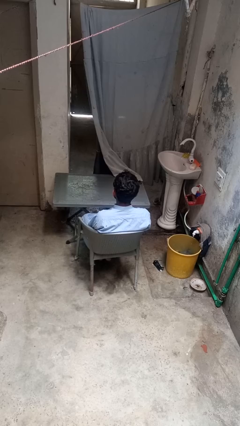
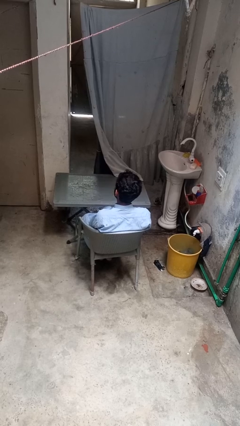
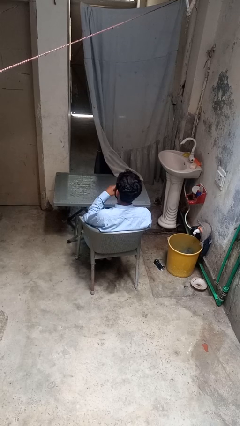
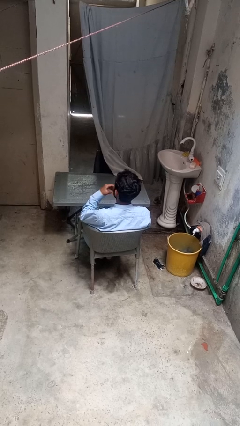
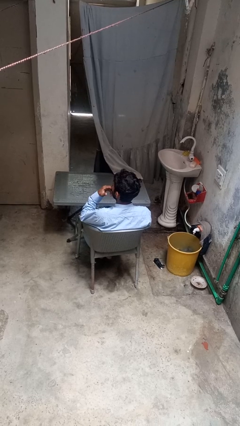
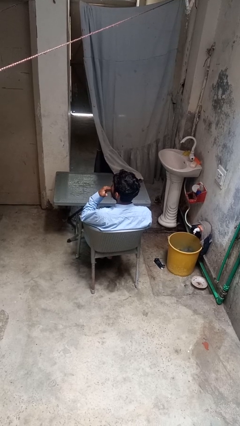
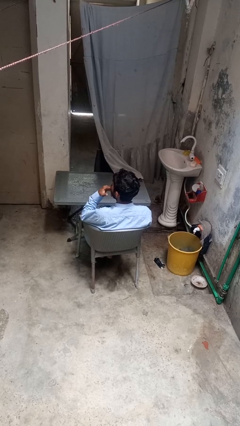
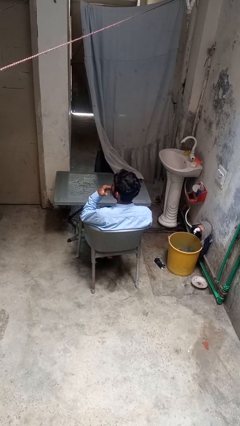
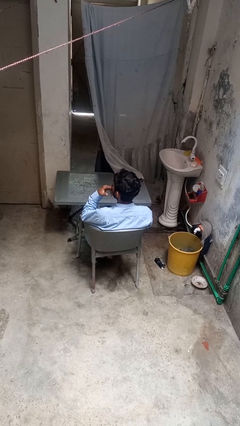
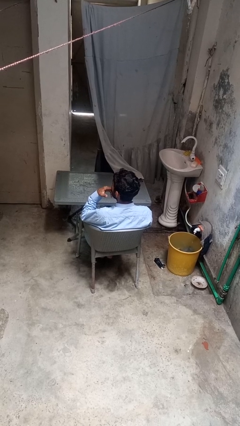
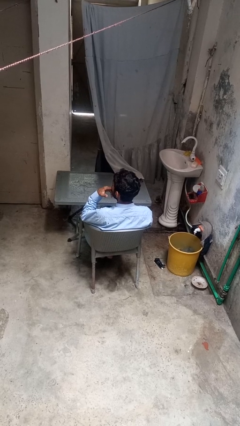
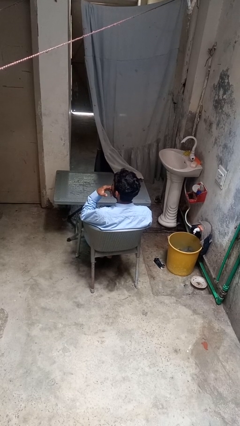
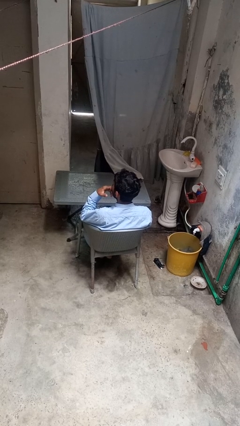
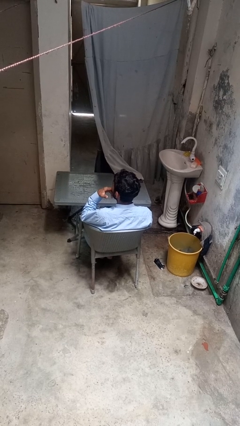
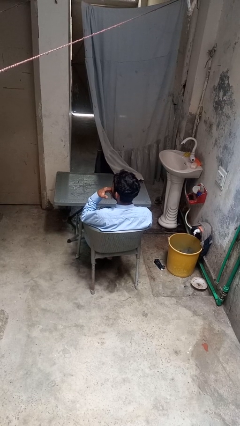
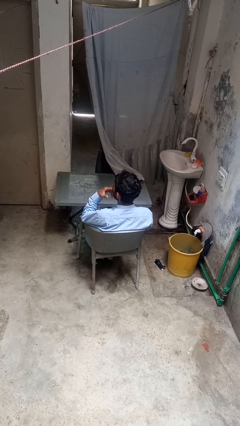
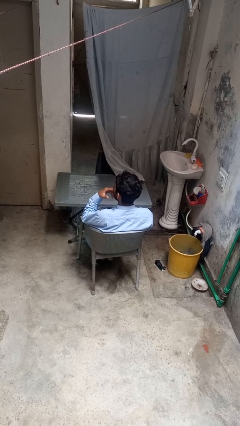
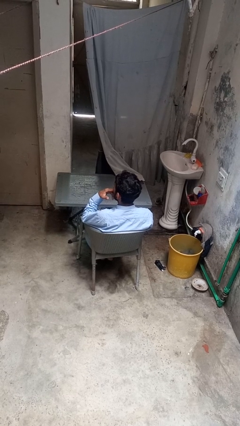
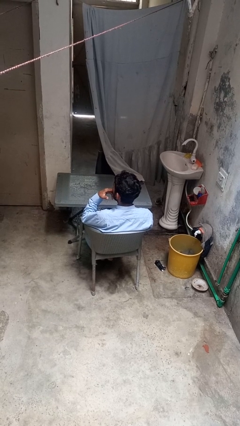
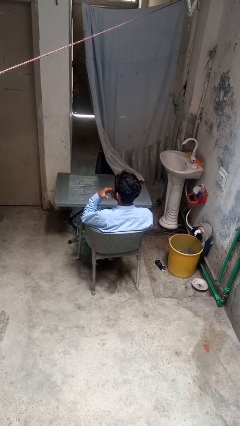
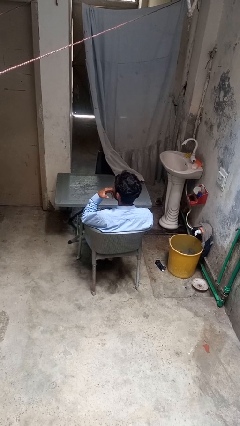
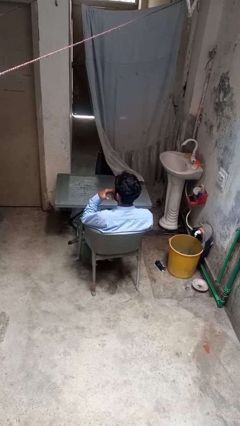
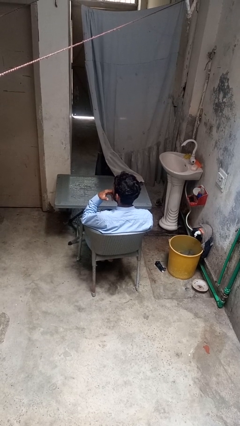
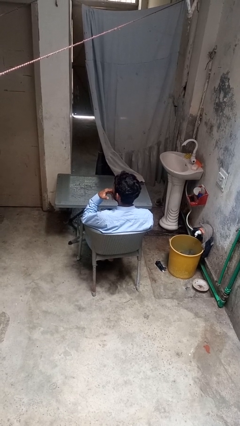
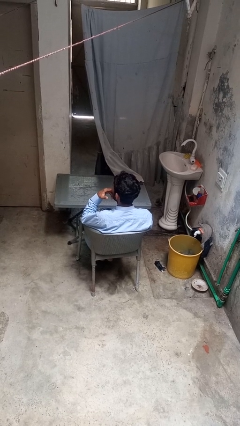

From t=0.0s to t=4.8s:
person licks fingers

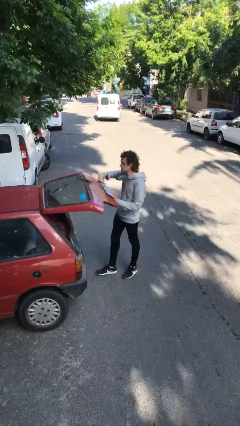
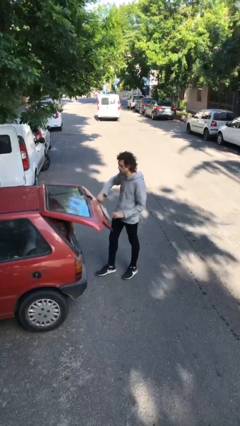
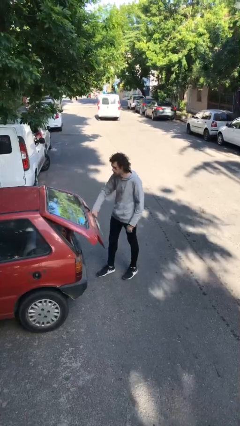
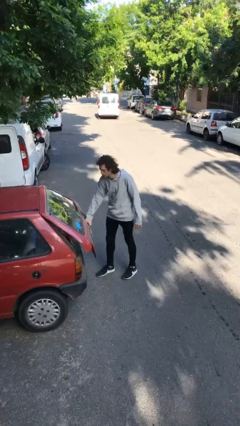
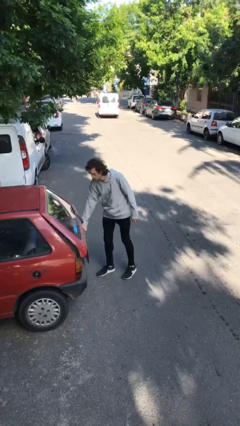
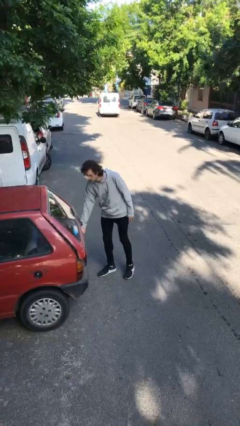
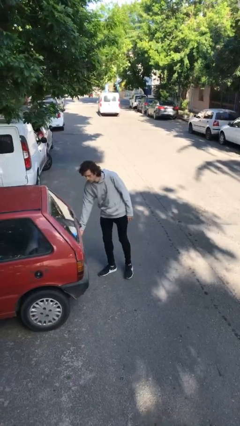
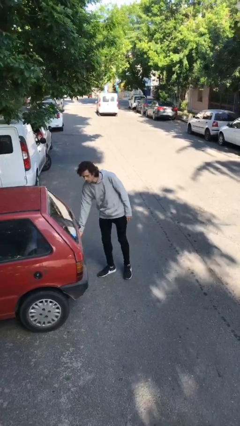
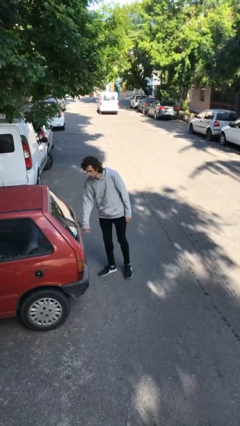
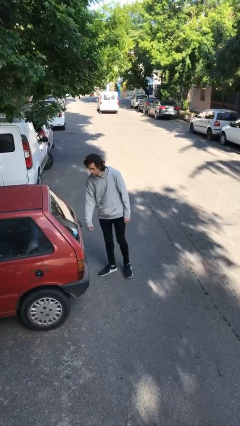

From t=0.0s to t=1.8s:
person closes car trunk

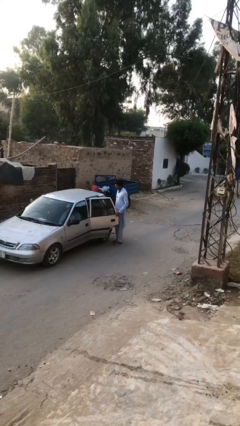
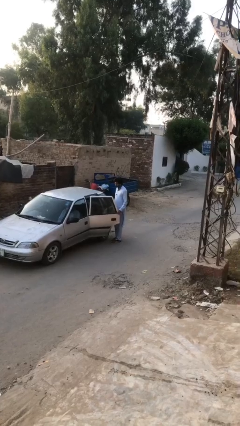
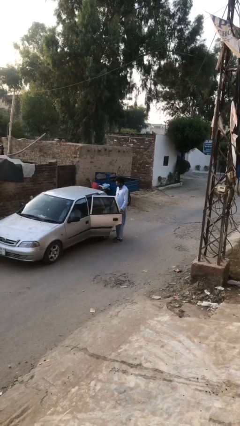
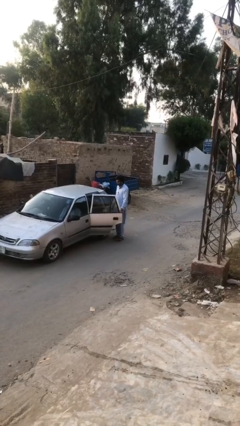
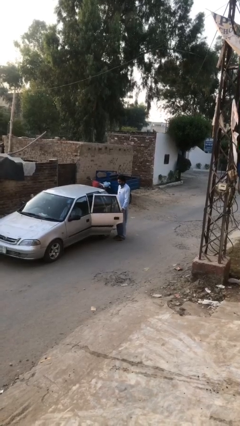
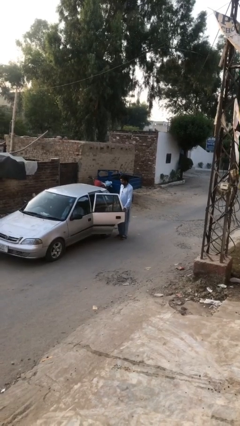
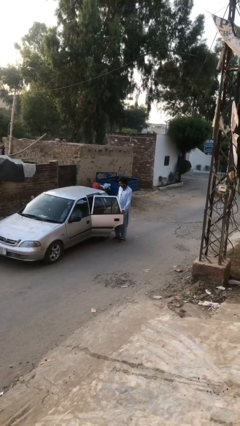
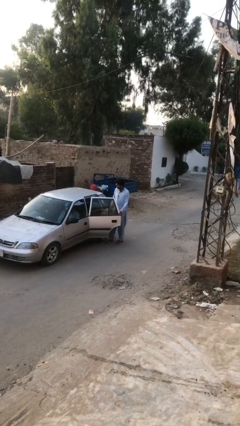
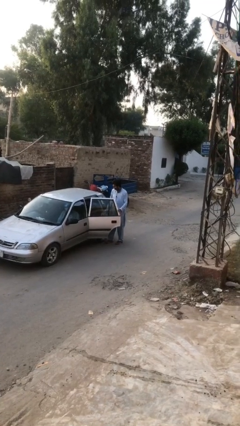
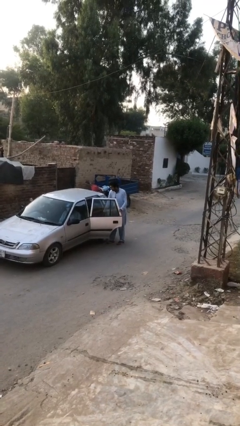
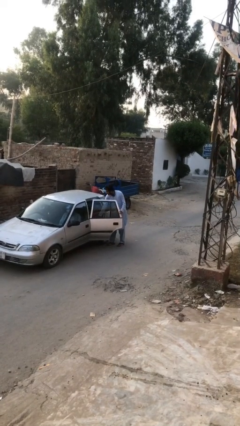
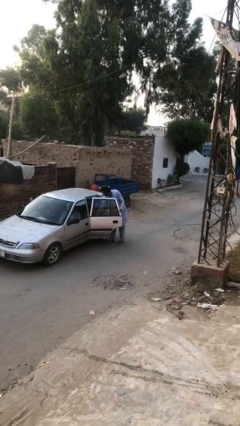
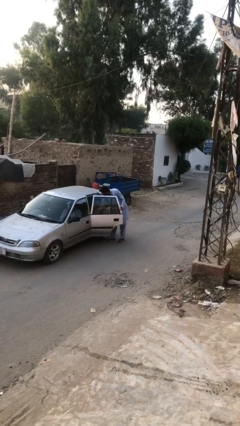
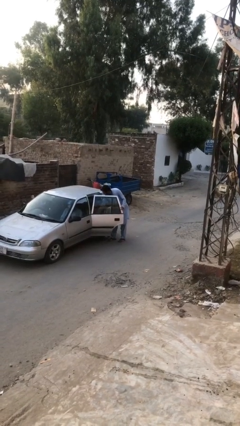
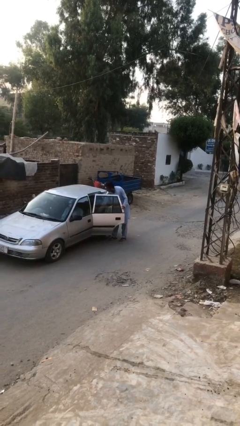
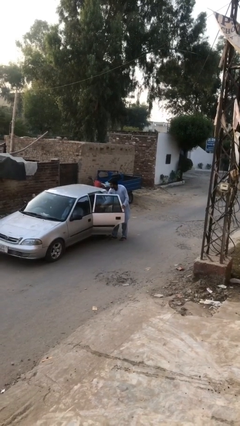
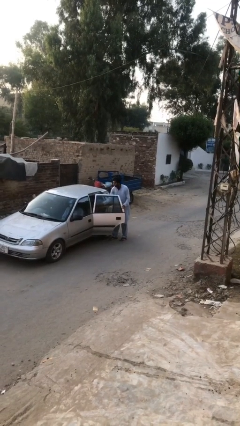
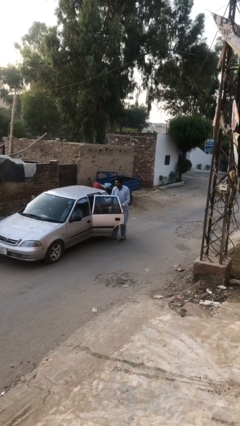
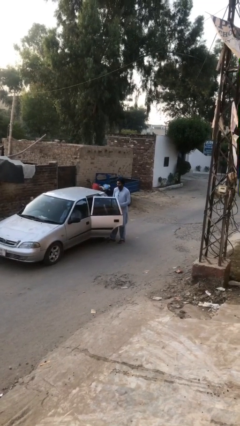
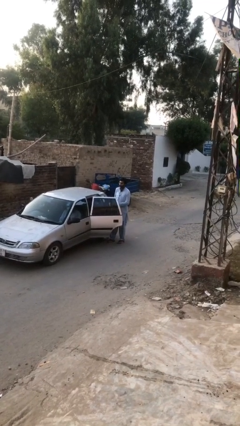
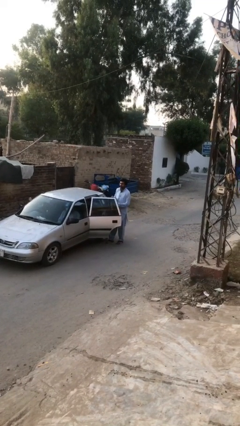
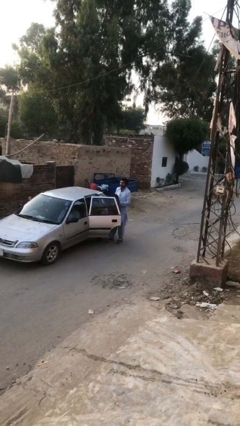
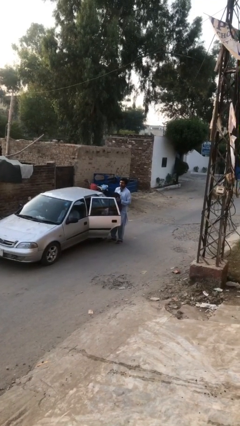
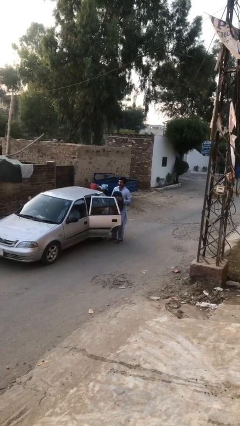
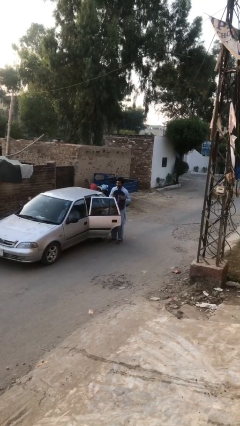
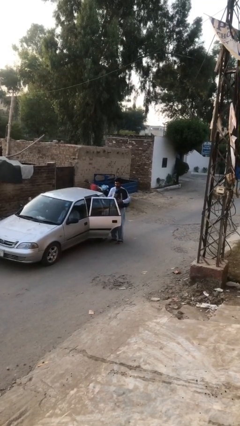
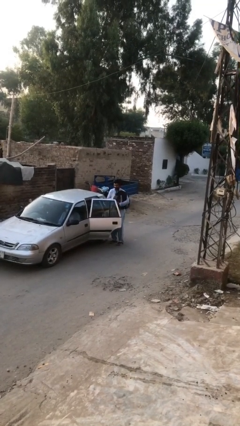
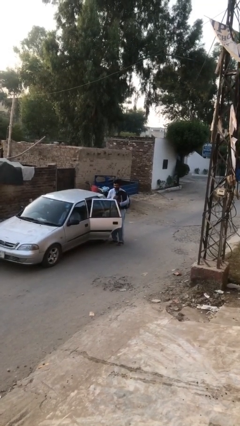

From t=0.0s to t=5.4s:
person unloads car

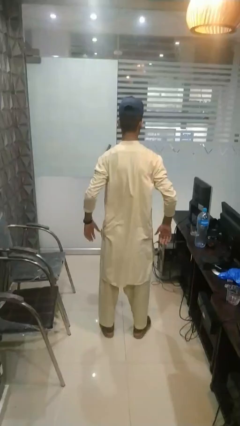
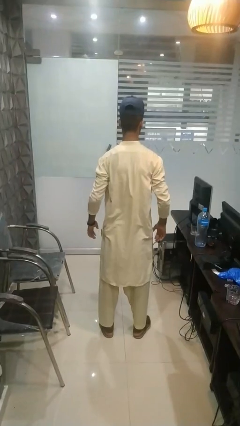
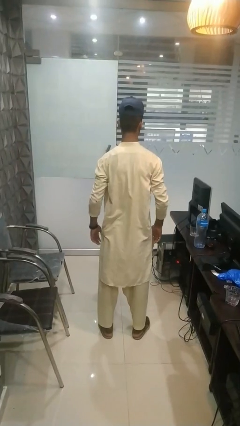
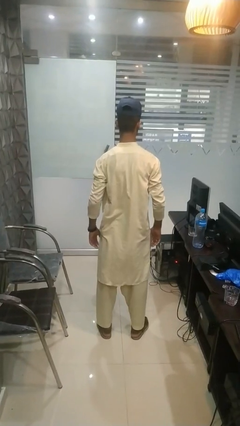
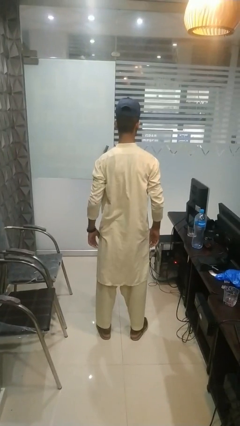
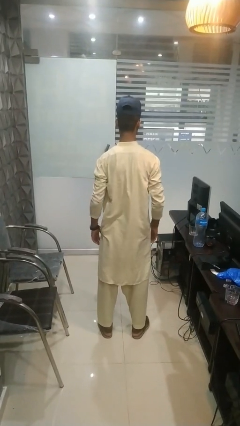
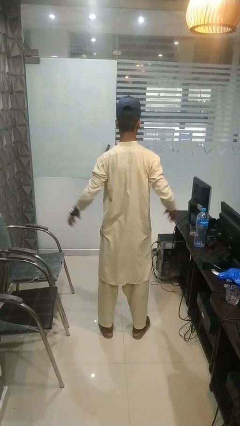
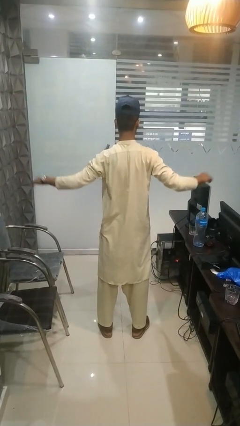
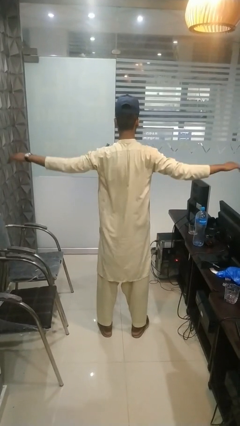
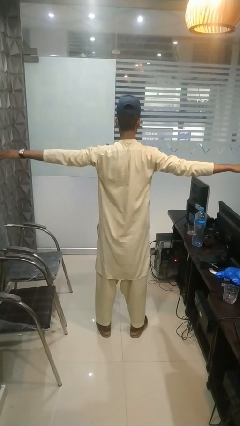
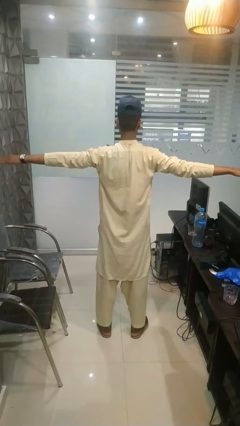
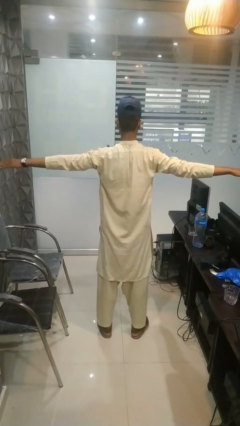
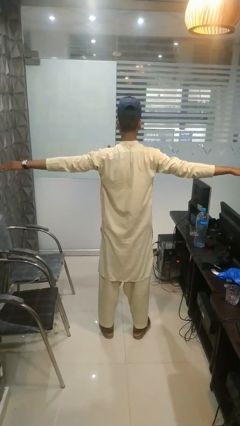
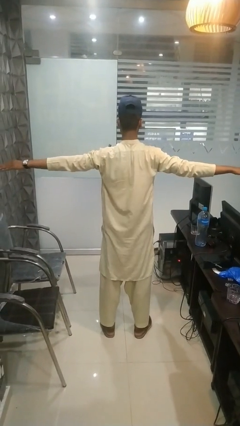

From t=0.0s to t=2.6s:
person stretches arms to side

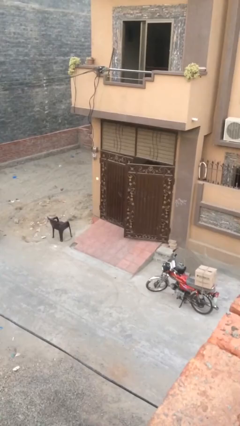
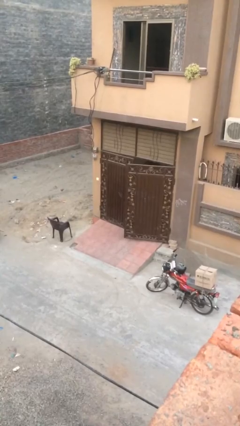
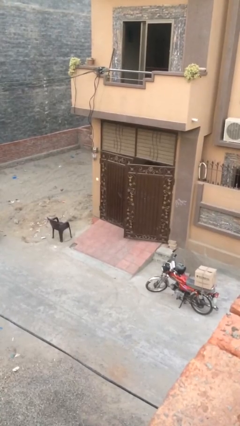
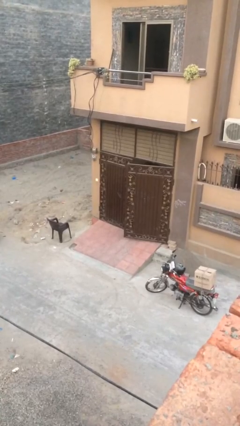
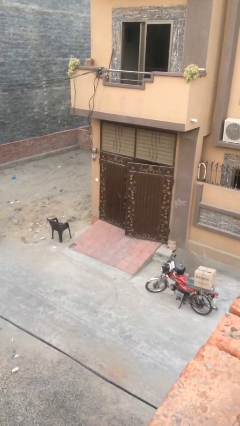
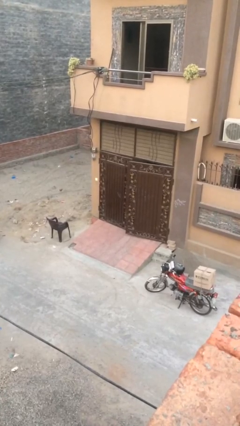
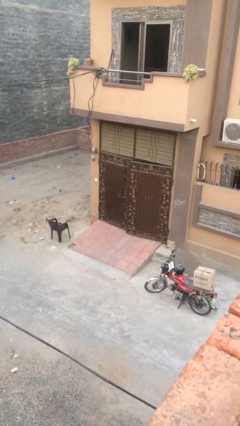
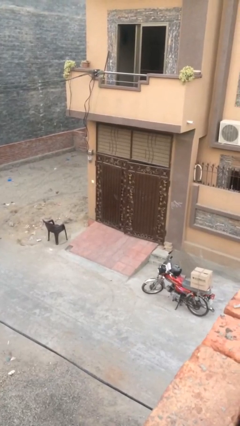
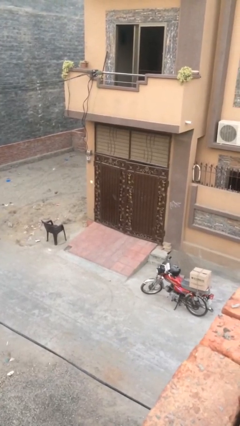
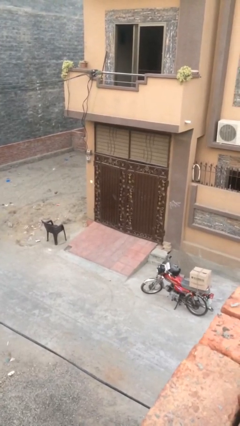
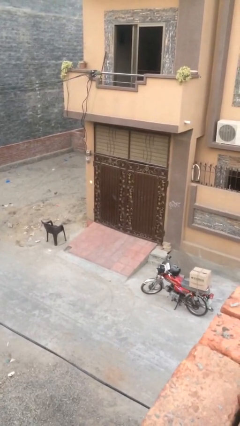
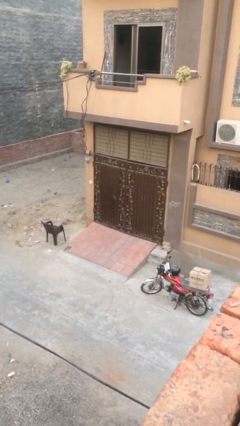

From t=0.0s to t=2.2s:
person closes facility door

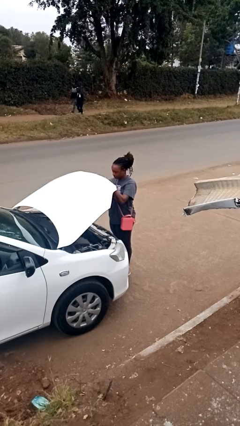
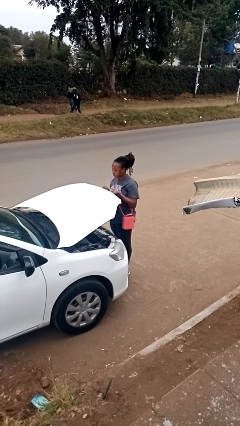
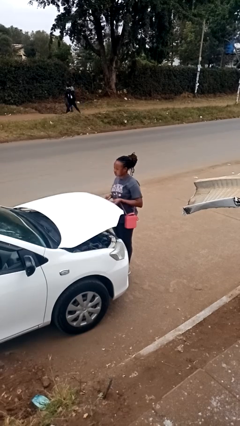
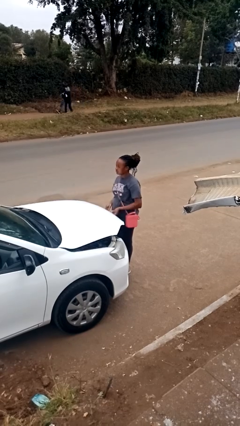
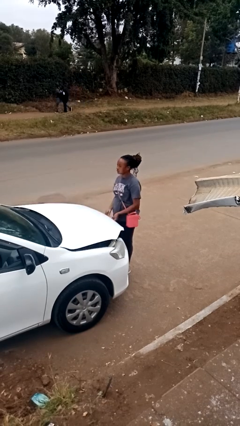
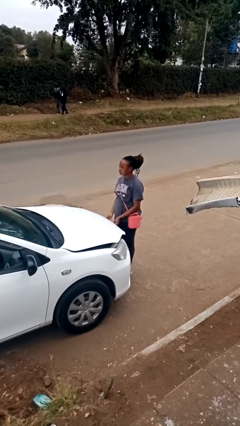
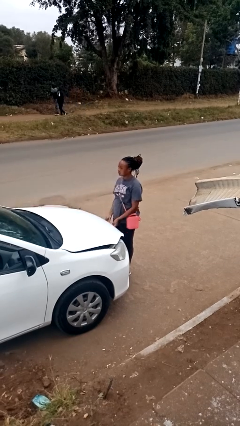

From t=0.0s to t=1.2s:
person closes car hood
